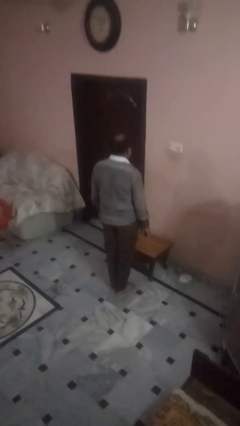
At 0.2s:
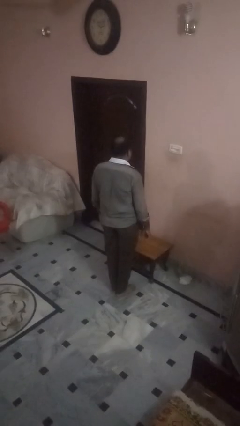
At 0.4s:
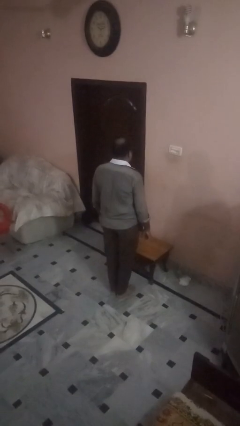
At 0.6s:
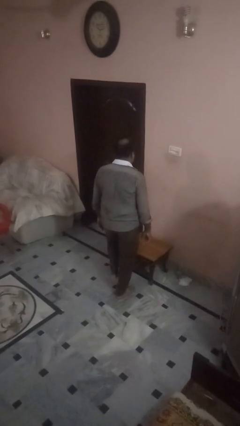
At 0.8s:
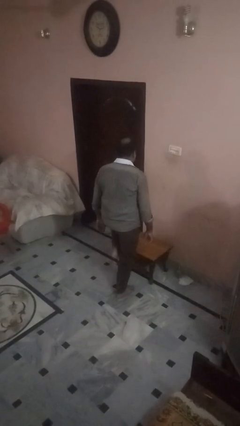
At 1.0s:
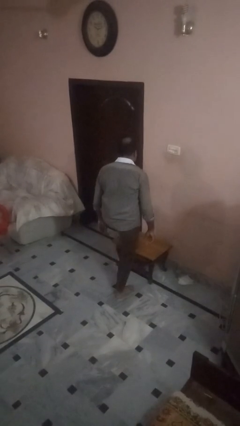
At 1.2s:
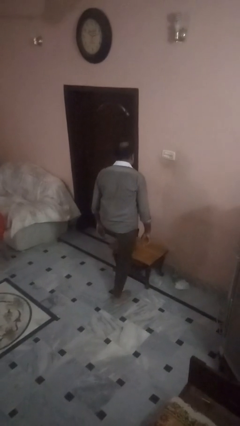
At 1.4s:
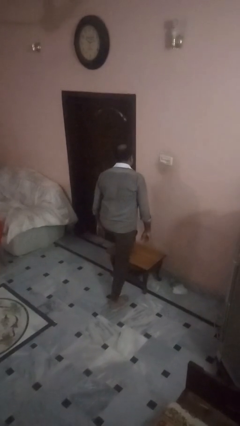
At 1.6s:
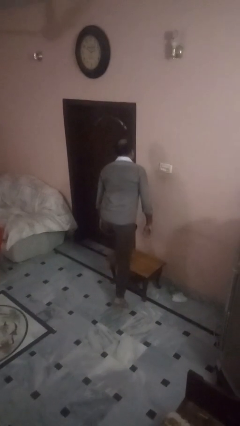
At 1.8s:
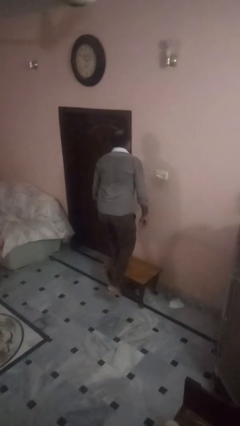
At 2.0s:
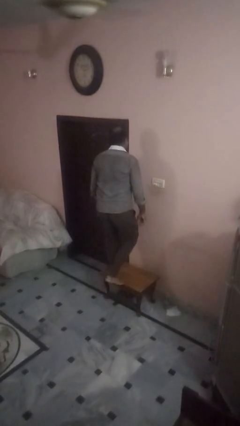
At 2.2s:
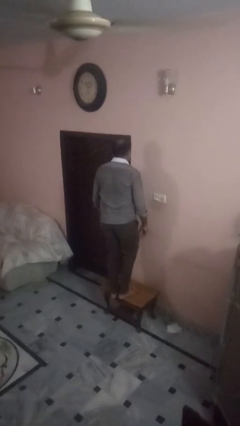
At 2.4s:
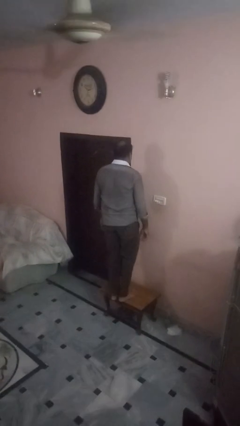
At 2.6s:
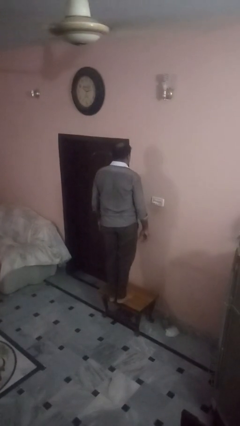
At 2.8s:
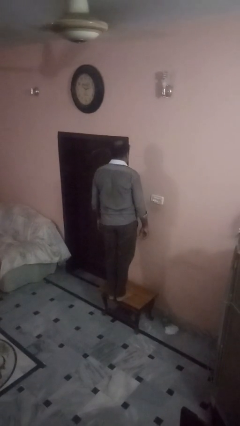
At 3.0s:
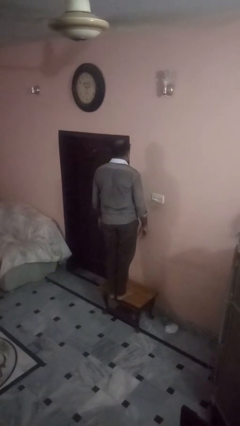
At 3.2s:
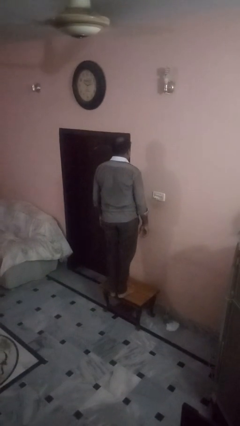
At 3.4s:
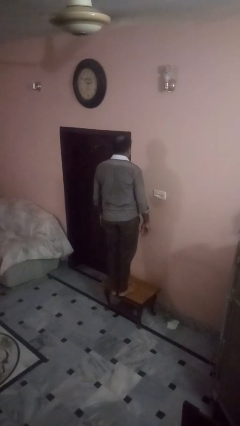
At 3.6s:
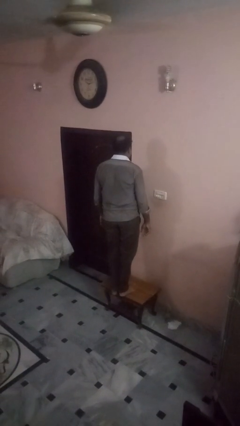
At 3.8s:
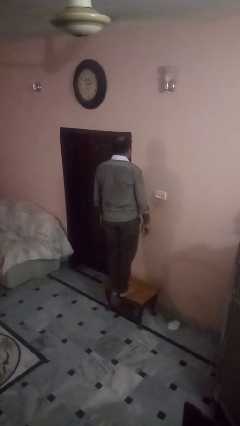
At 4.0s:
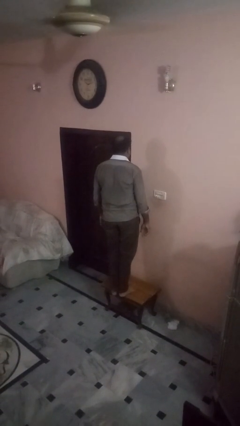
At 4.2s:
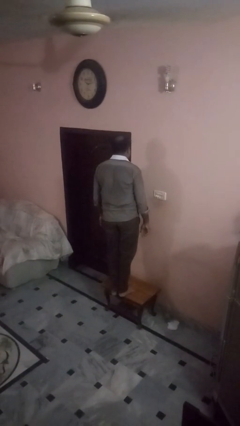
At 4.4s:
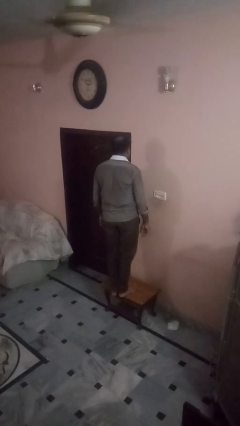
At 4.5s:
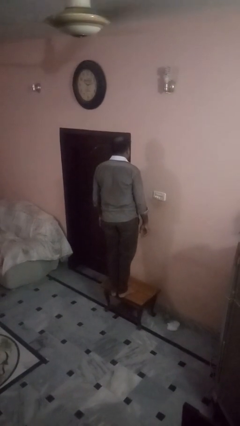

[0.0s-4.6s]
person climbs on table

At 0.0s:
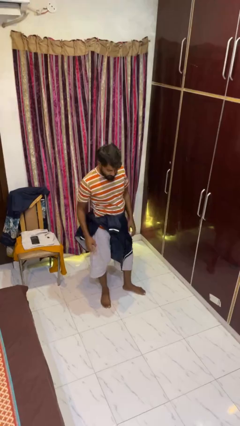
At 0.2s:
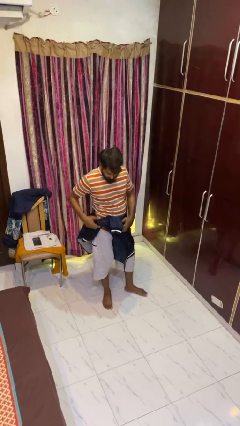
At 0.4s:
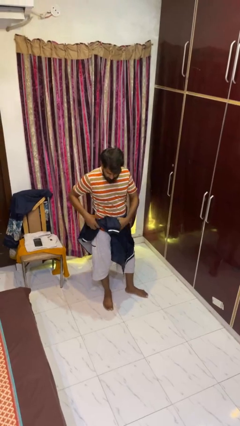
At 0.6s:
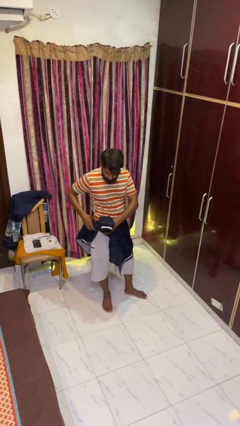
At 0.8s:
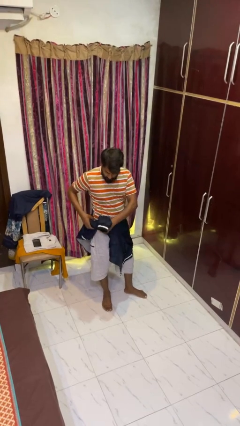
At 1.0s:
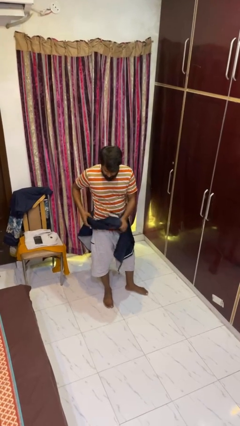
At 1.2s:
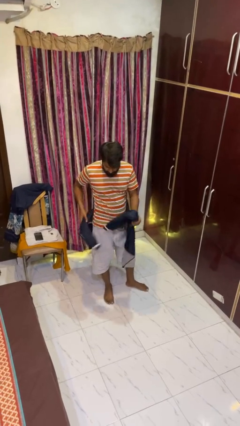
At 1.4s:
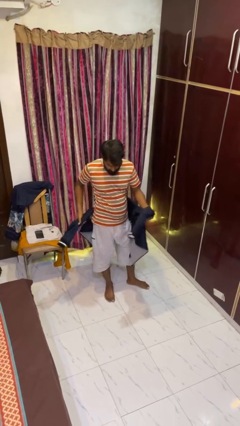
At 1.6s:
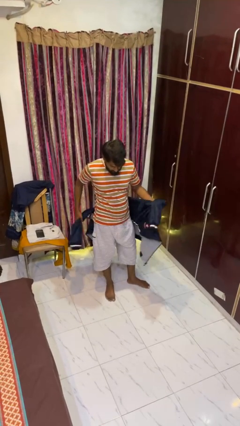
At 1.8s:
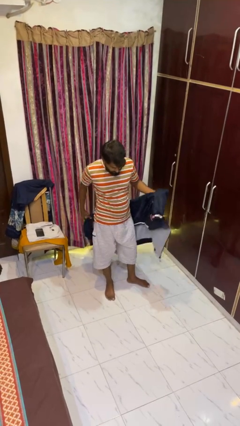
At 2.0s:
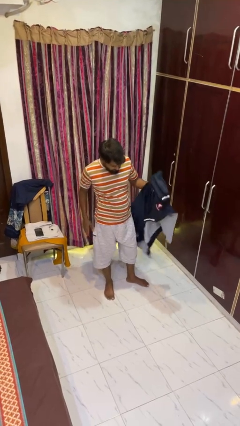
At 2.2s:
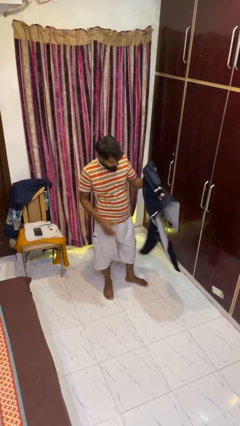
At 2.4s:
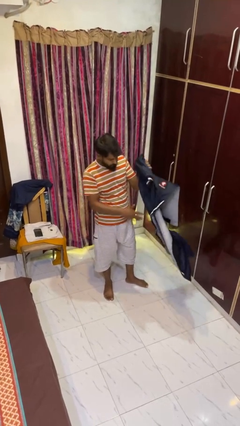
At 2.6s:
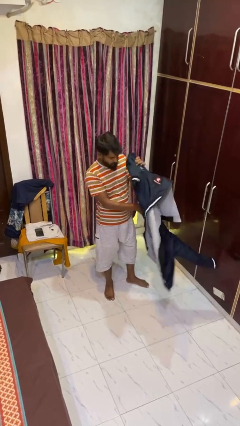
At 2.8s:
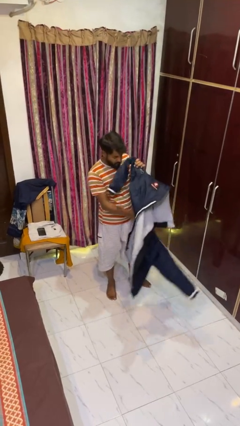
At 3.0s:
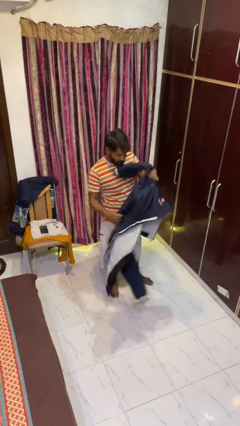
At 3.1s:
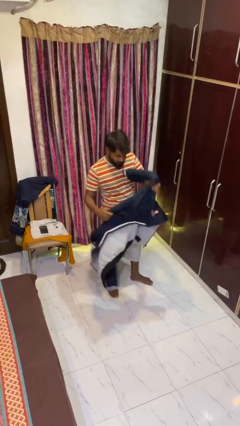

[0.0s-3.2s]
person unties jacket around waist

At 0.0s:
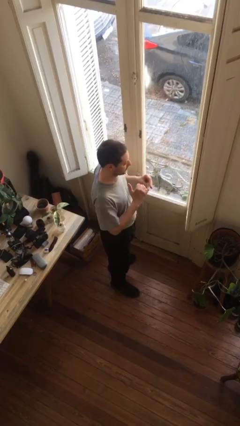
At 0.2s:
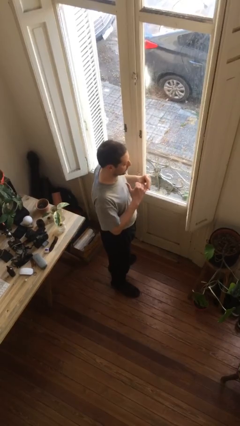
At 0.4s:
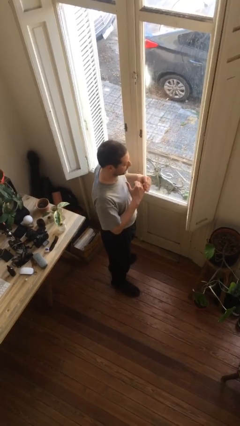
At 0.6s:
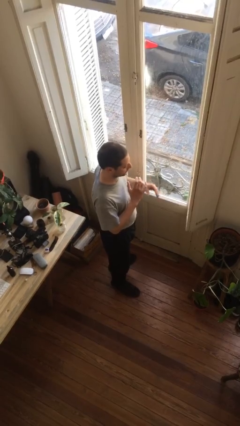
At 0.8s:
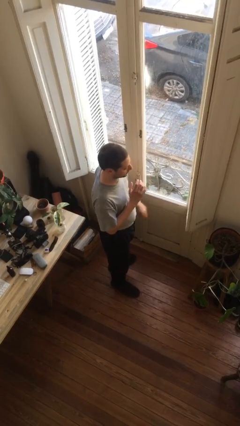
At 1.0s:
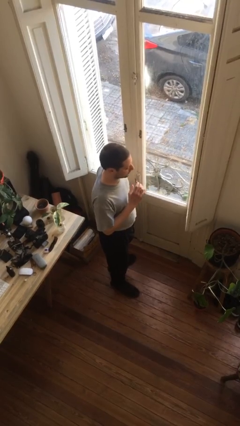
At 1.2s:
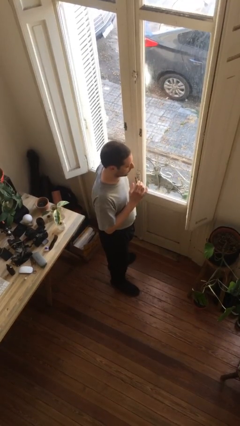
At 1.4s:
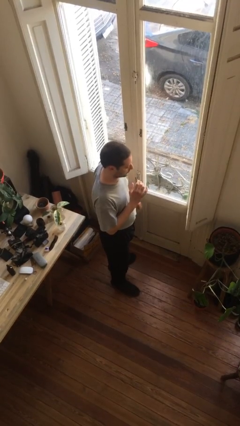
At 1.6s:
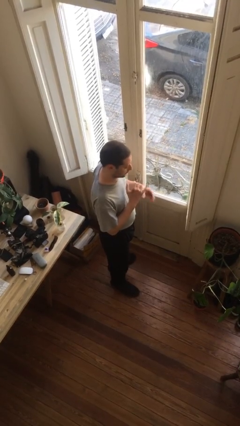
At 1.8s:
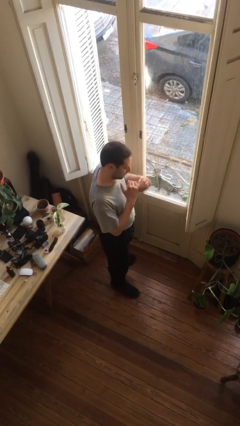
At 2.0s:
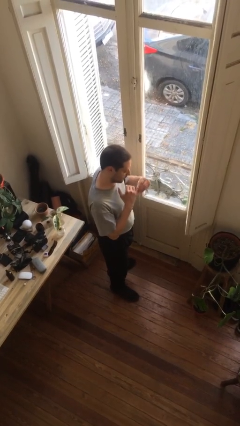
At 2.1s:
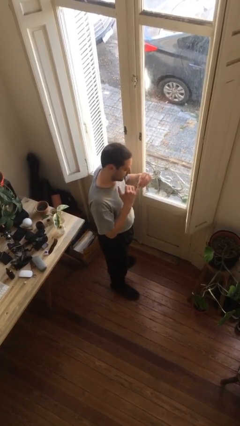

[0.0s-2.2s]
person puts on ring

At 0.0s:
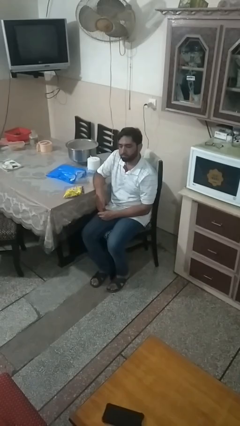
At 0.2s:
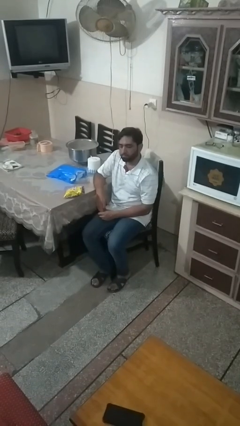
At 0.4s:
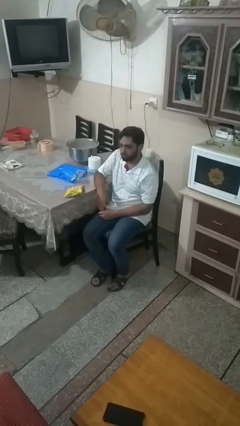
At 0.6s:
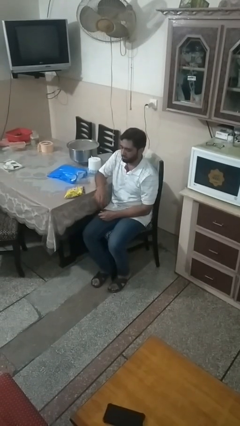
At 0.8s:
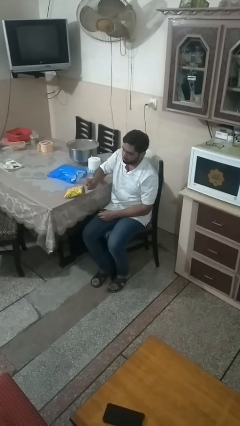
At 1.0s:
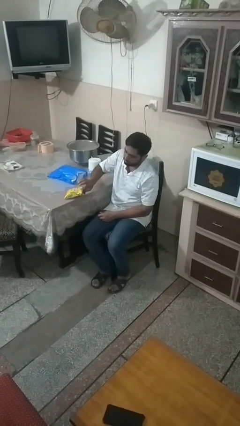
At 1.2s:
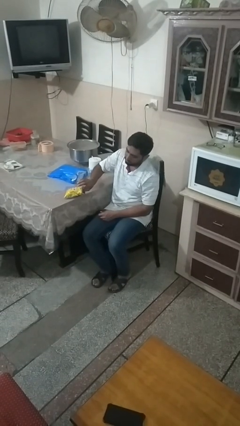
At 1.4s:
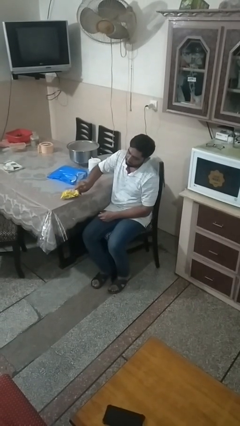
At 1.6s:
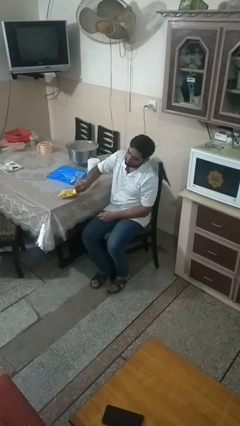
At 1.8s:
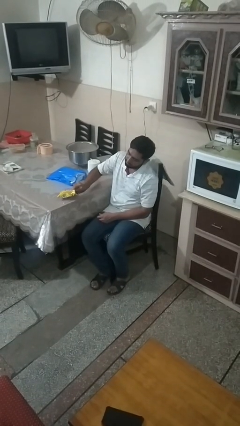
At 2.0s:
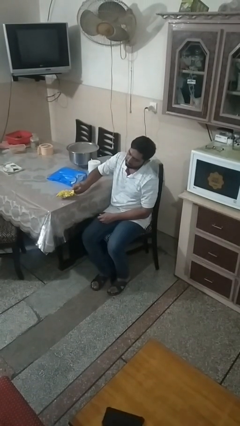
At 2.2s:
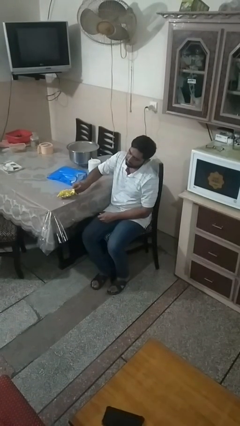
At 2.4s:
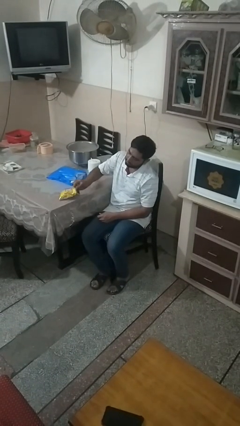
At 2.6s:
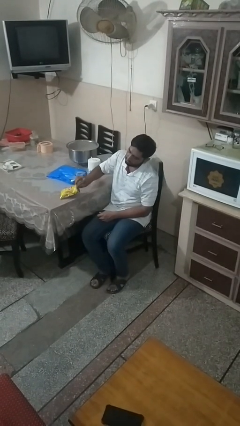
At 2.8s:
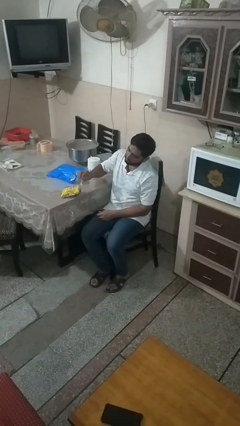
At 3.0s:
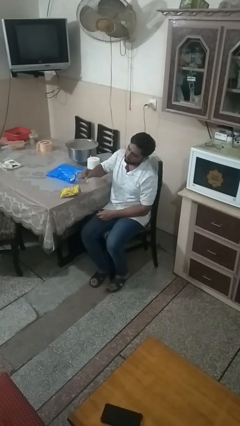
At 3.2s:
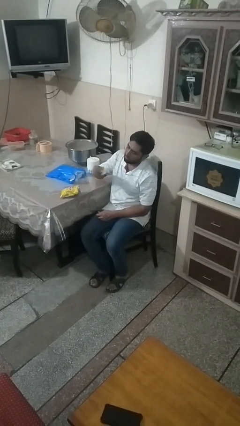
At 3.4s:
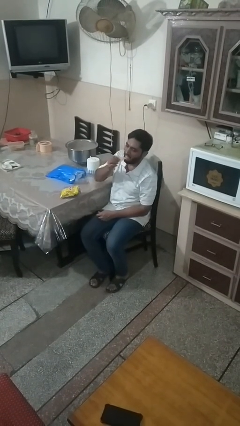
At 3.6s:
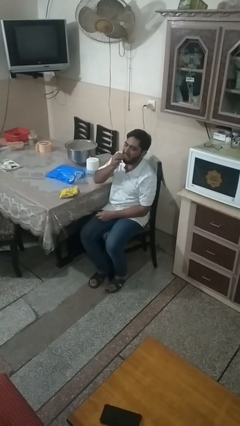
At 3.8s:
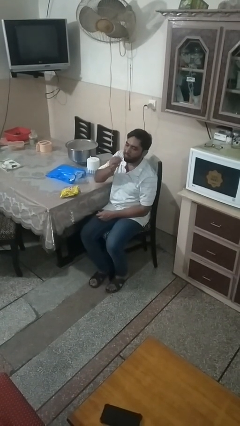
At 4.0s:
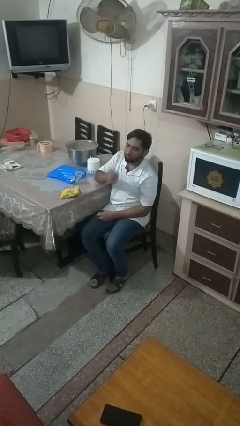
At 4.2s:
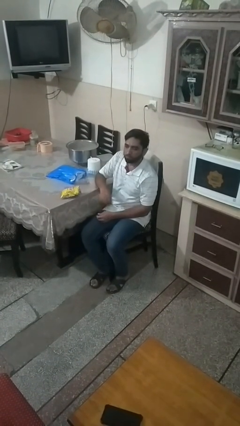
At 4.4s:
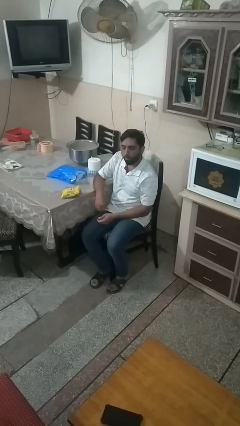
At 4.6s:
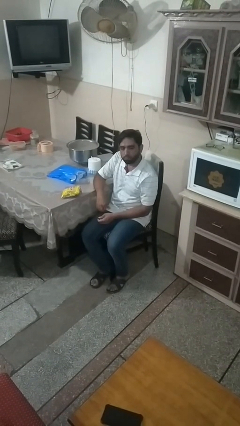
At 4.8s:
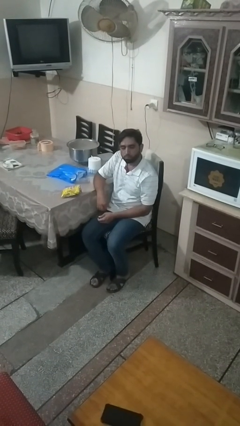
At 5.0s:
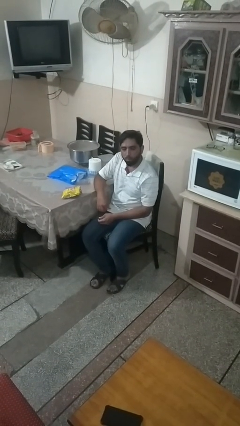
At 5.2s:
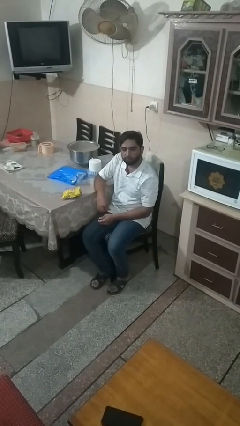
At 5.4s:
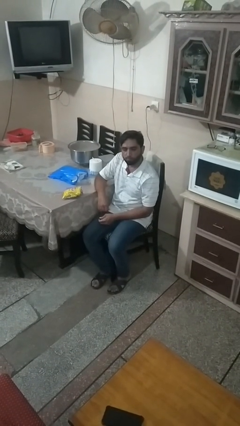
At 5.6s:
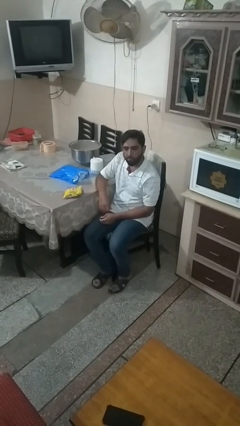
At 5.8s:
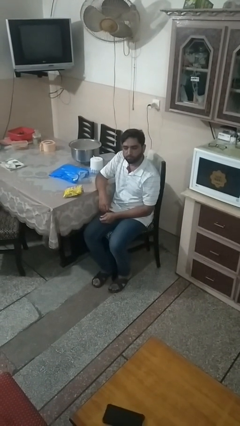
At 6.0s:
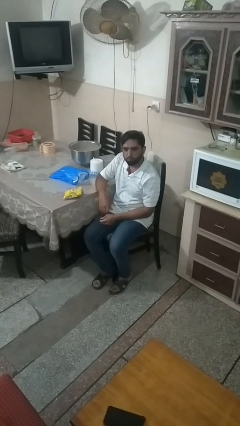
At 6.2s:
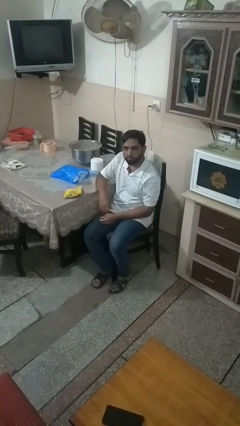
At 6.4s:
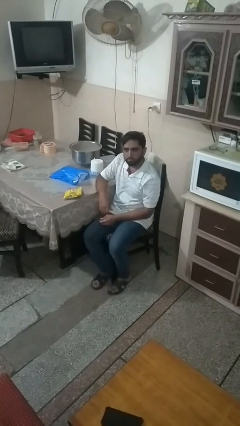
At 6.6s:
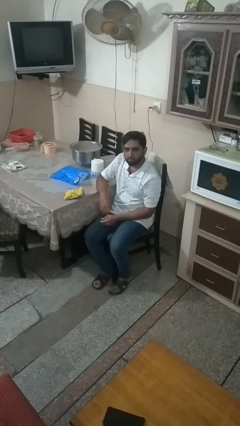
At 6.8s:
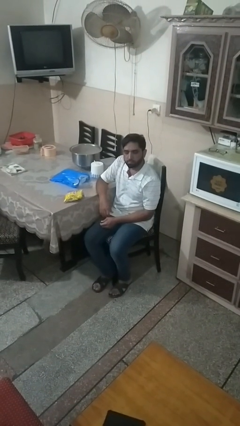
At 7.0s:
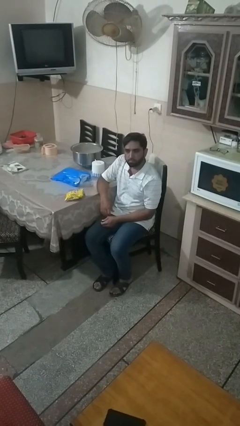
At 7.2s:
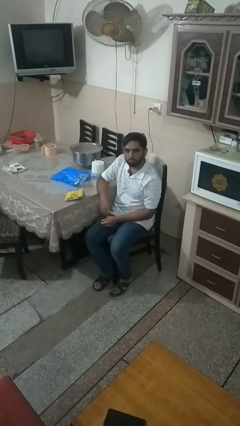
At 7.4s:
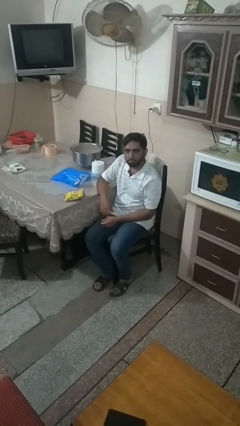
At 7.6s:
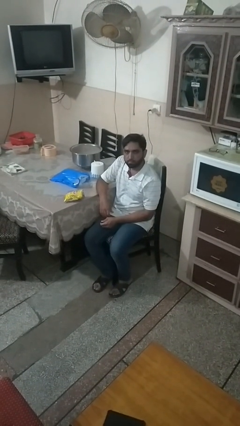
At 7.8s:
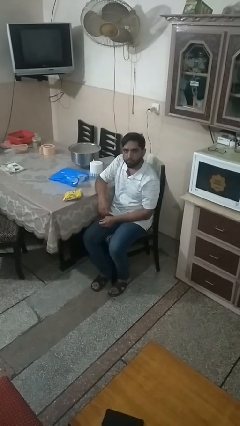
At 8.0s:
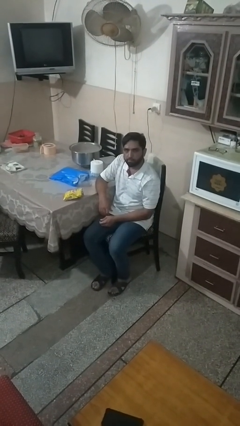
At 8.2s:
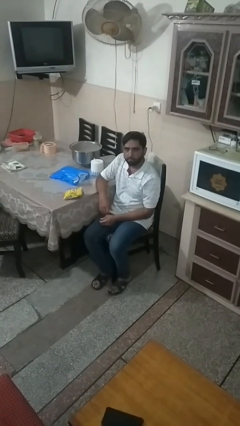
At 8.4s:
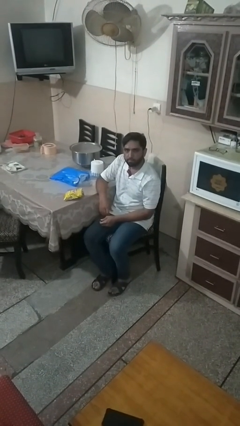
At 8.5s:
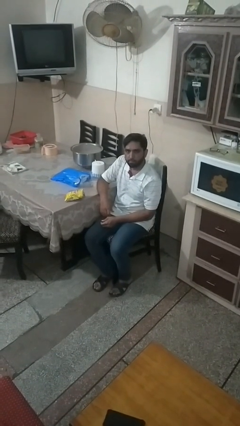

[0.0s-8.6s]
person eats snack from bag
